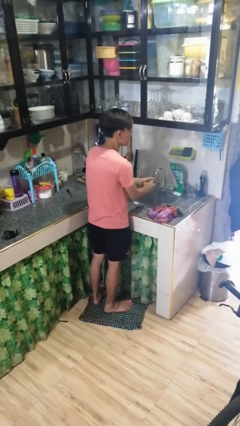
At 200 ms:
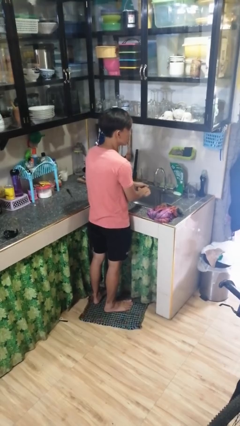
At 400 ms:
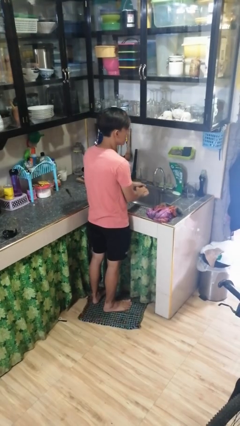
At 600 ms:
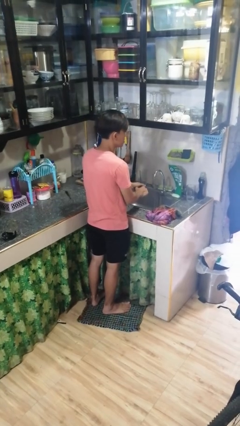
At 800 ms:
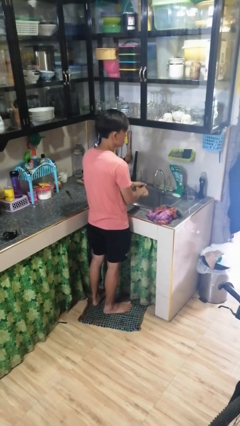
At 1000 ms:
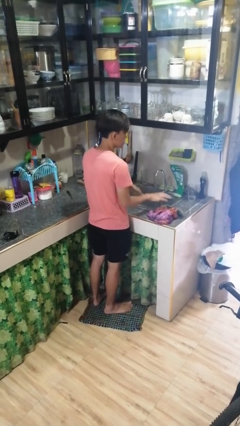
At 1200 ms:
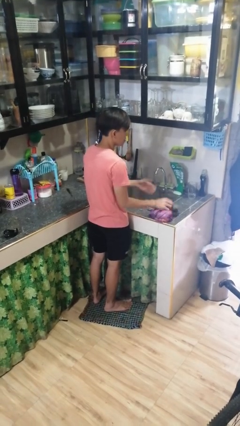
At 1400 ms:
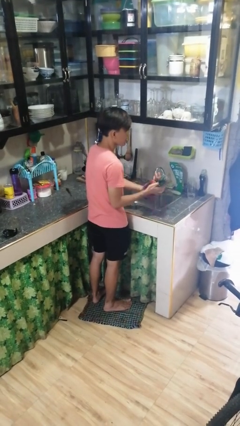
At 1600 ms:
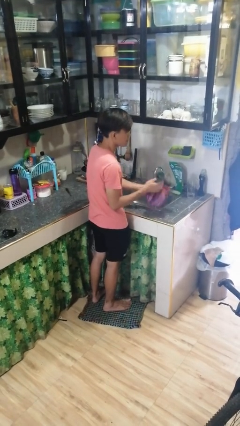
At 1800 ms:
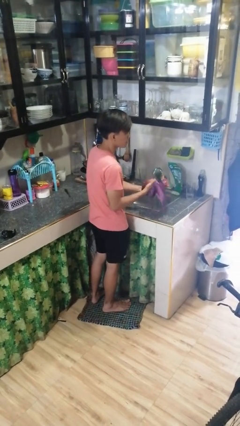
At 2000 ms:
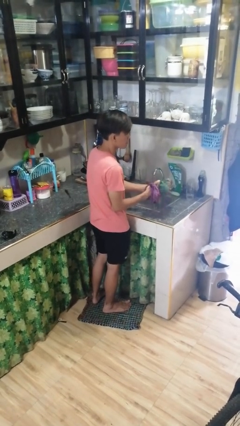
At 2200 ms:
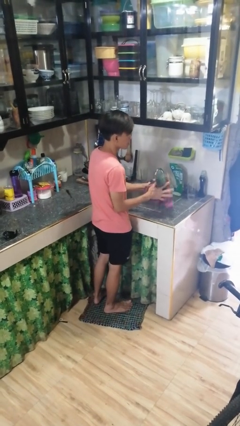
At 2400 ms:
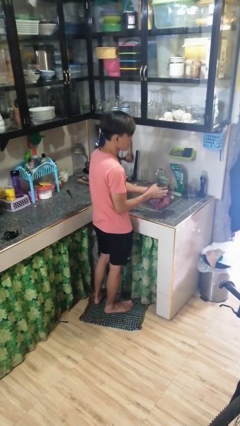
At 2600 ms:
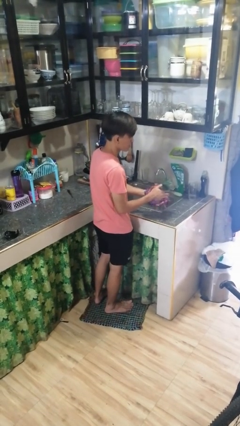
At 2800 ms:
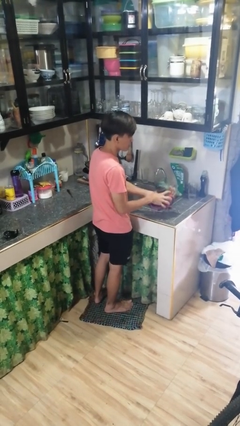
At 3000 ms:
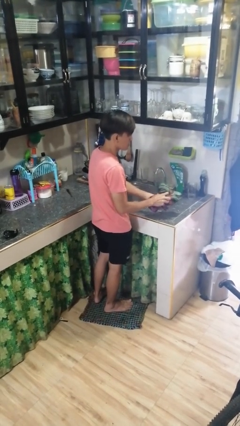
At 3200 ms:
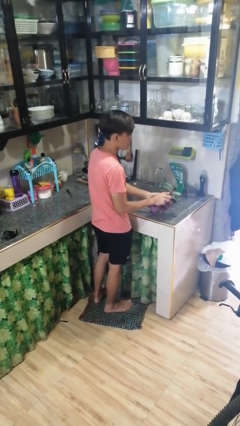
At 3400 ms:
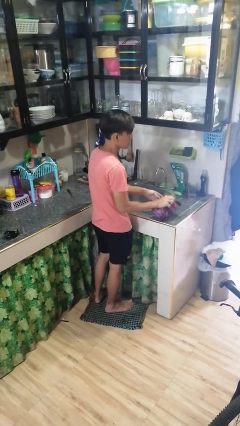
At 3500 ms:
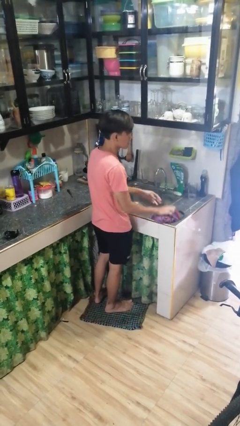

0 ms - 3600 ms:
person dries hands with towel

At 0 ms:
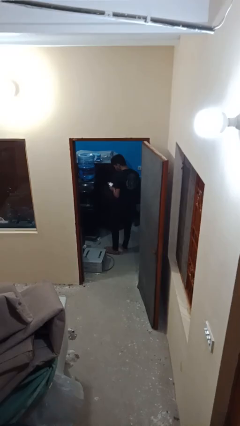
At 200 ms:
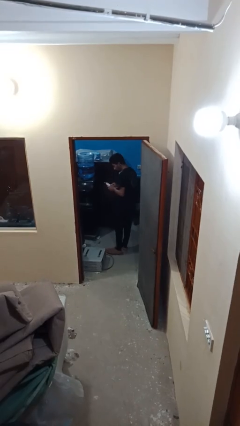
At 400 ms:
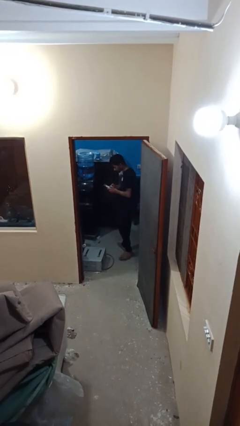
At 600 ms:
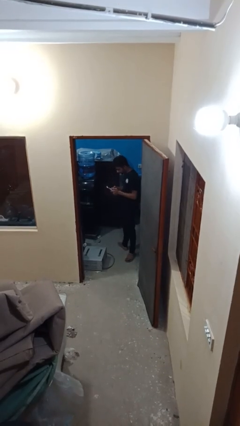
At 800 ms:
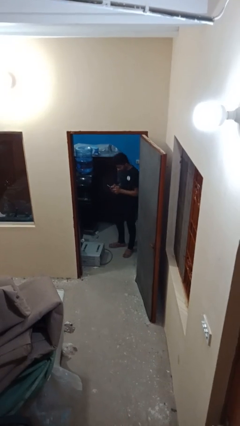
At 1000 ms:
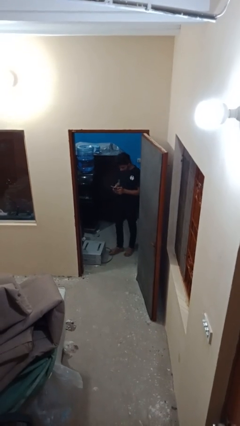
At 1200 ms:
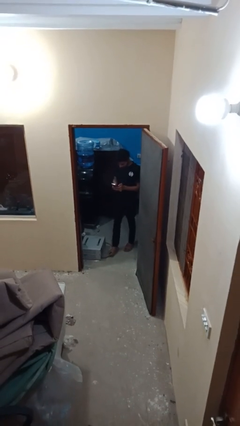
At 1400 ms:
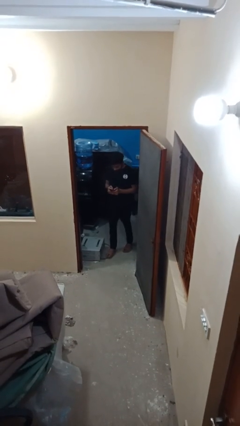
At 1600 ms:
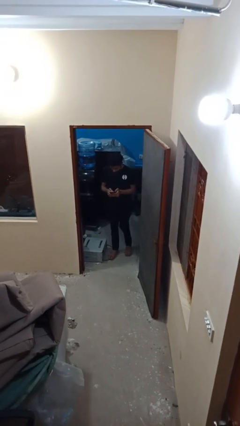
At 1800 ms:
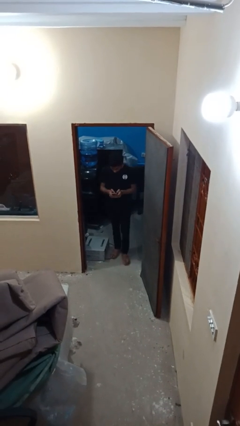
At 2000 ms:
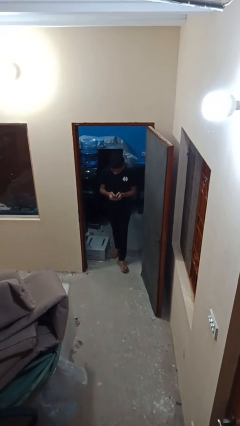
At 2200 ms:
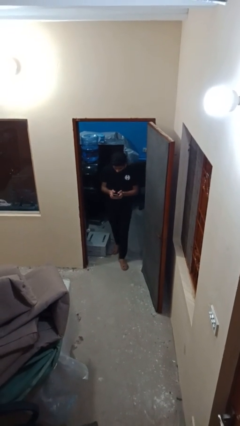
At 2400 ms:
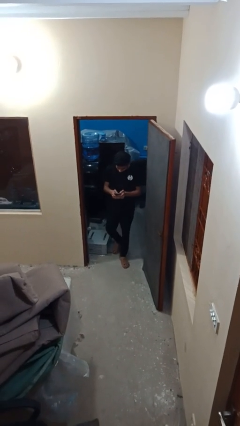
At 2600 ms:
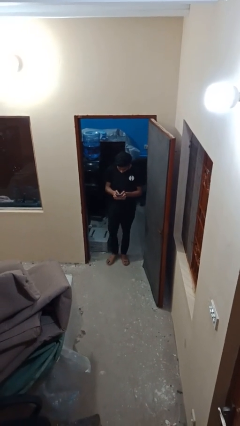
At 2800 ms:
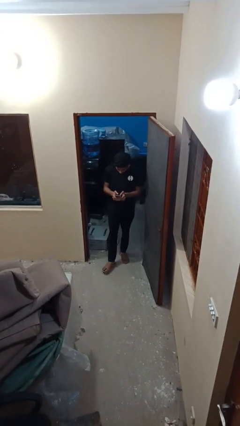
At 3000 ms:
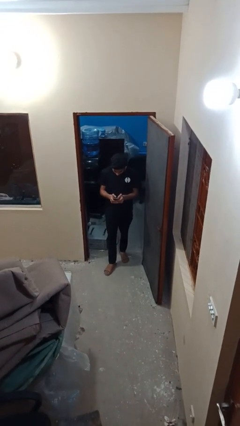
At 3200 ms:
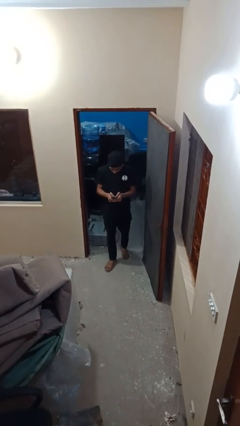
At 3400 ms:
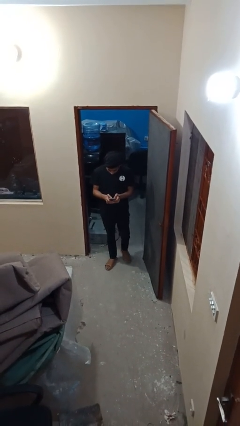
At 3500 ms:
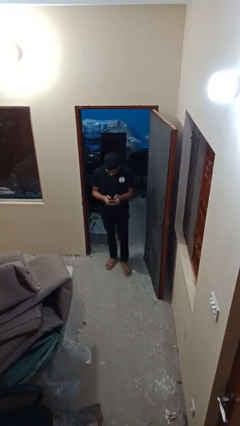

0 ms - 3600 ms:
person enters scene through structure

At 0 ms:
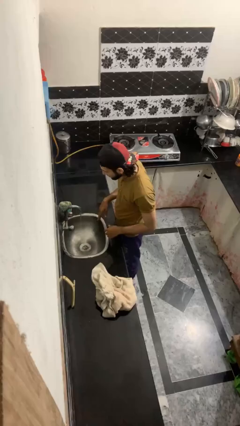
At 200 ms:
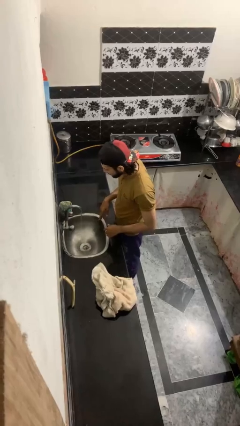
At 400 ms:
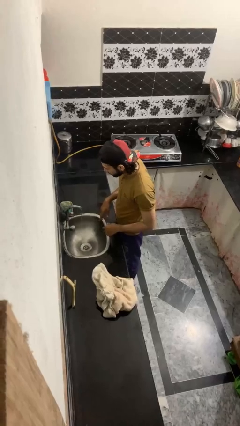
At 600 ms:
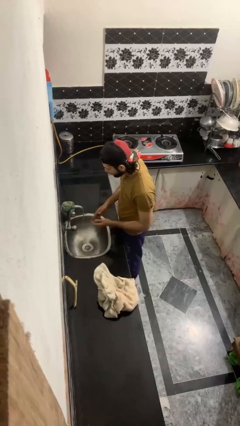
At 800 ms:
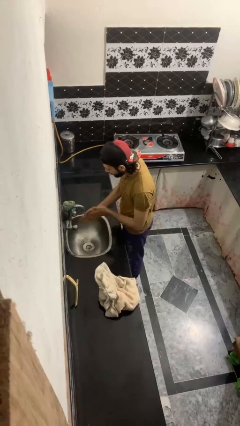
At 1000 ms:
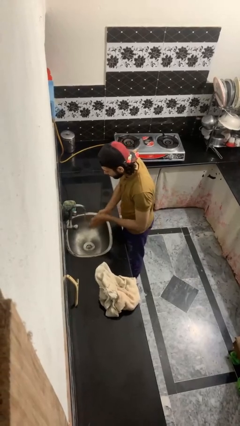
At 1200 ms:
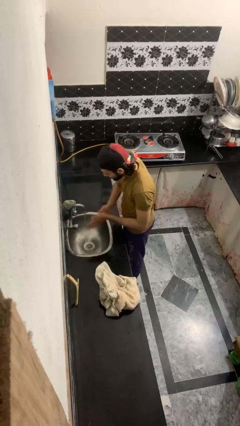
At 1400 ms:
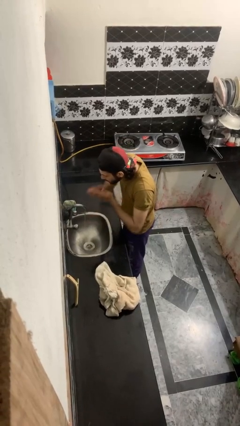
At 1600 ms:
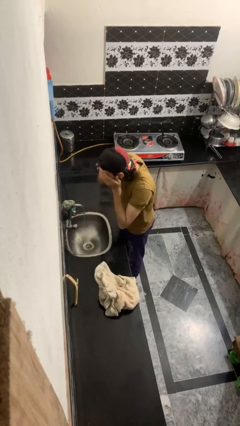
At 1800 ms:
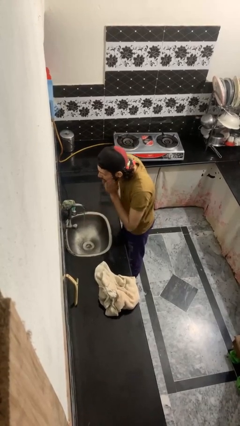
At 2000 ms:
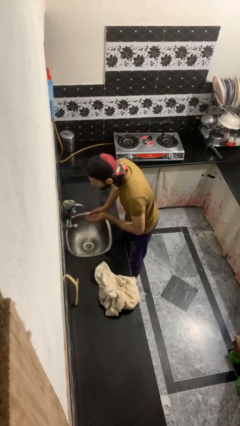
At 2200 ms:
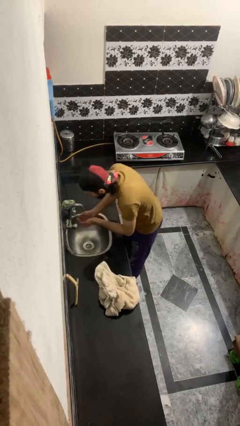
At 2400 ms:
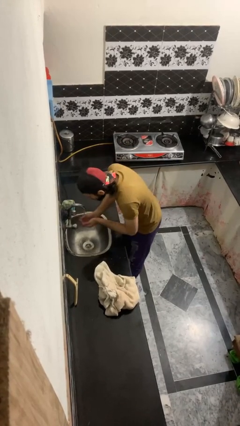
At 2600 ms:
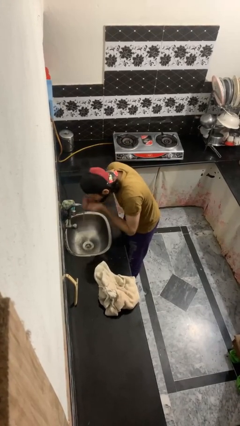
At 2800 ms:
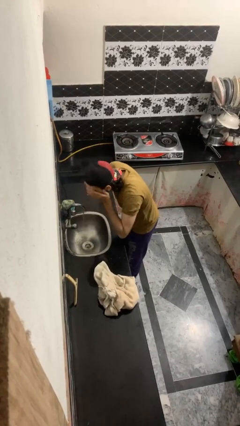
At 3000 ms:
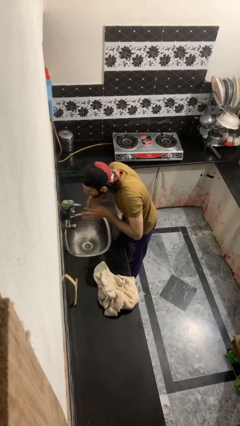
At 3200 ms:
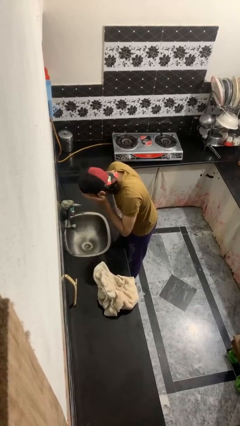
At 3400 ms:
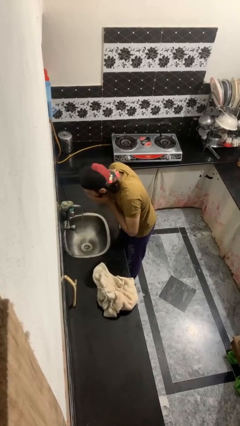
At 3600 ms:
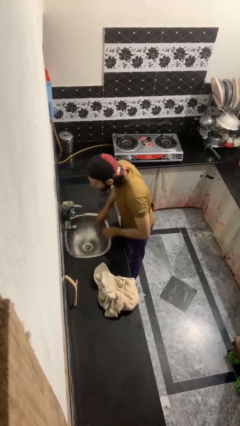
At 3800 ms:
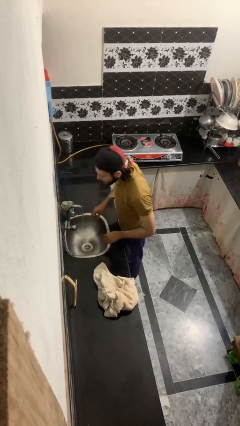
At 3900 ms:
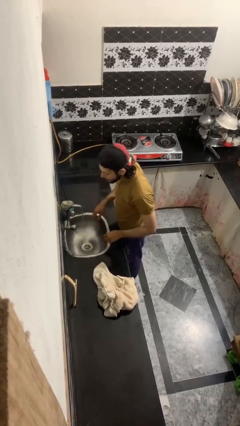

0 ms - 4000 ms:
person washes face

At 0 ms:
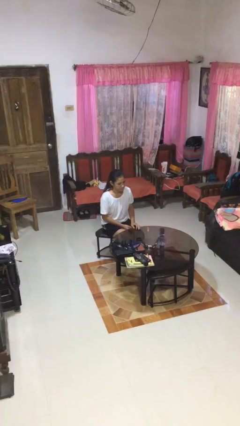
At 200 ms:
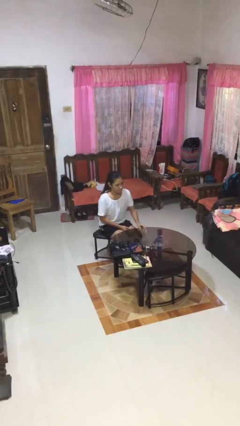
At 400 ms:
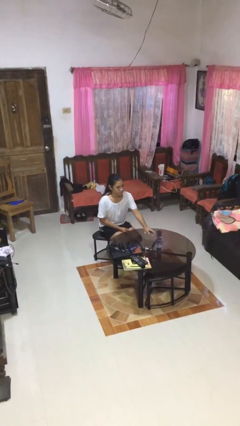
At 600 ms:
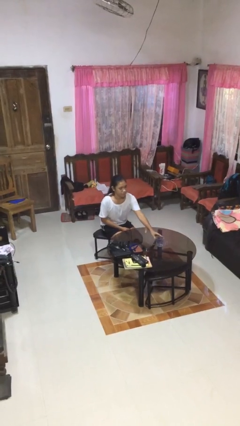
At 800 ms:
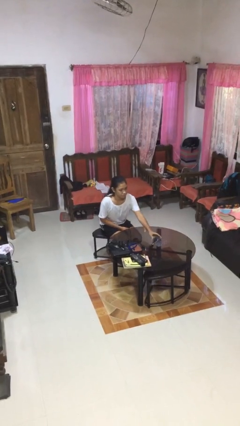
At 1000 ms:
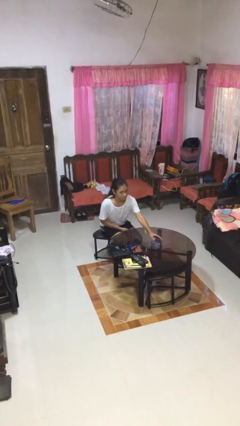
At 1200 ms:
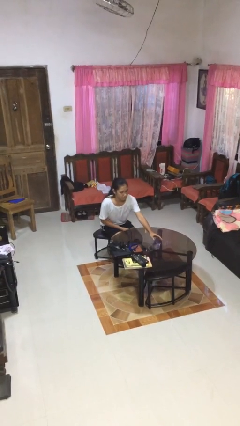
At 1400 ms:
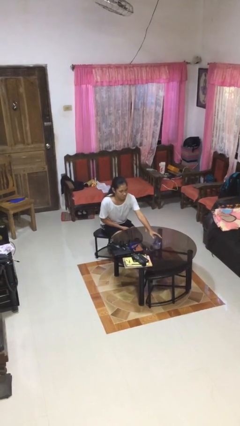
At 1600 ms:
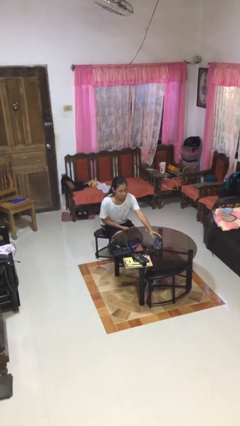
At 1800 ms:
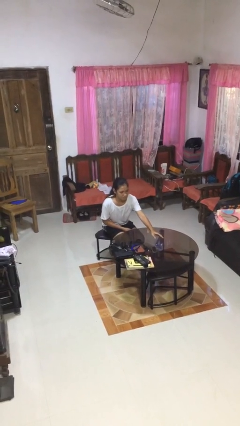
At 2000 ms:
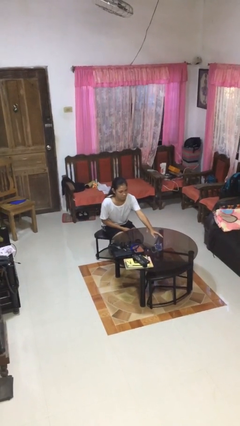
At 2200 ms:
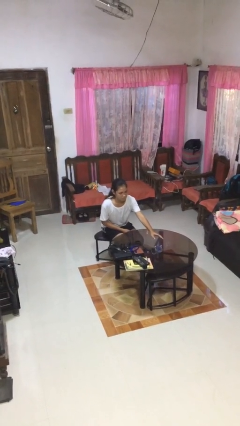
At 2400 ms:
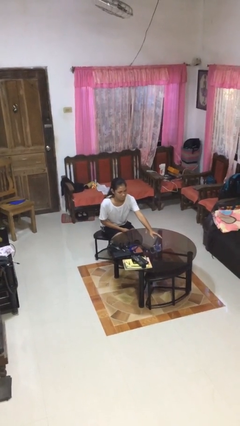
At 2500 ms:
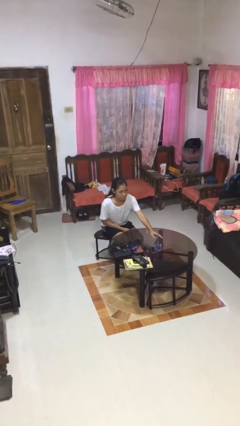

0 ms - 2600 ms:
person knocks over glass

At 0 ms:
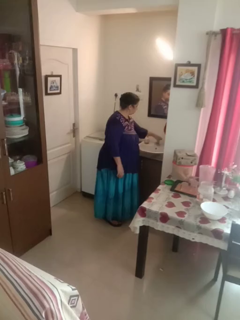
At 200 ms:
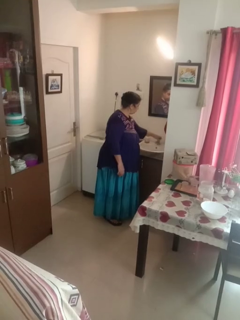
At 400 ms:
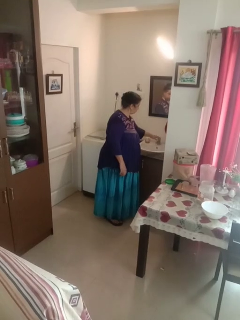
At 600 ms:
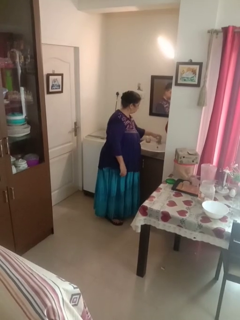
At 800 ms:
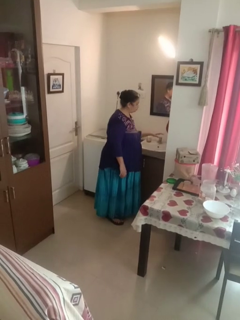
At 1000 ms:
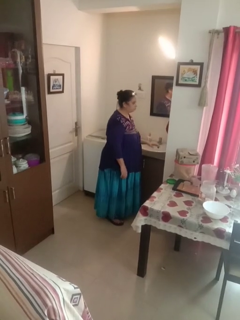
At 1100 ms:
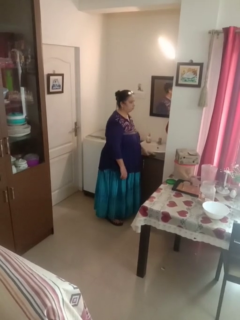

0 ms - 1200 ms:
person turns off faucet

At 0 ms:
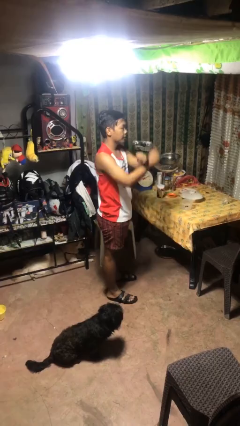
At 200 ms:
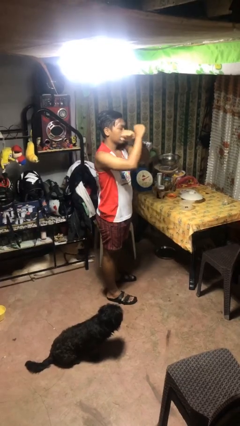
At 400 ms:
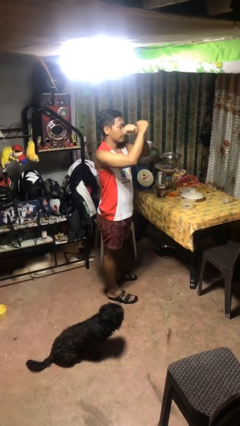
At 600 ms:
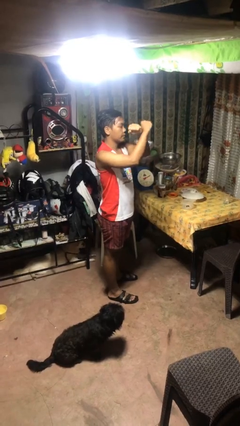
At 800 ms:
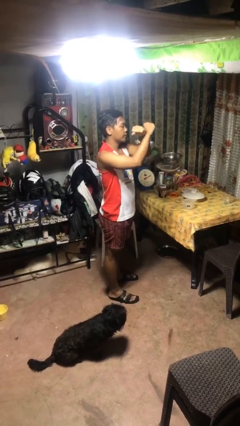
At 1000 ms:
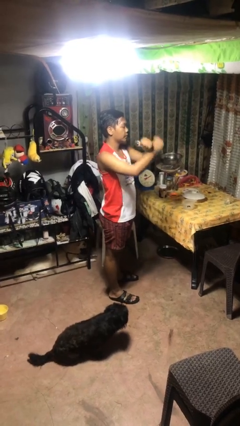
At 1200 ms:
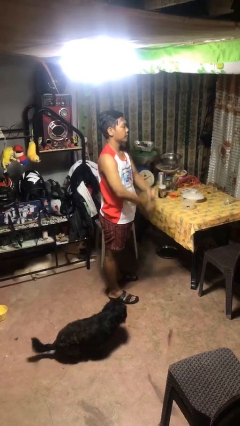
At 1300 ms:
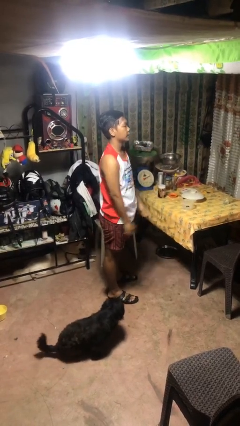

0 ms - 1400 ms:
person gestures arms x

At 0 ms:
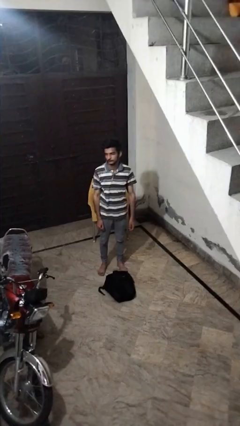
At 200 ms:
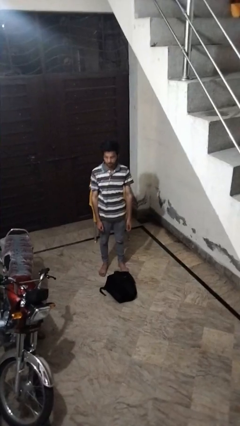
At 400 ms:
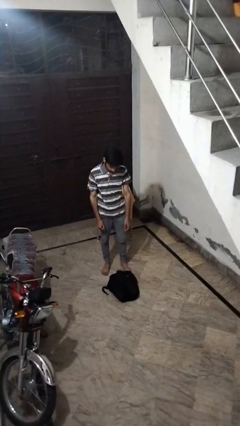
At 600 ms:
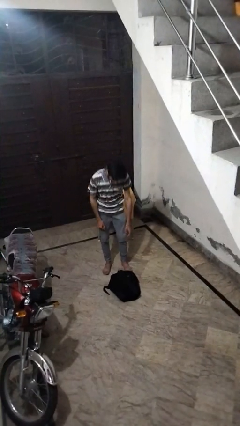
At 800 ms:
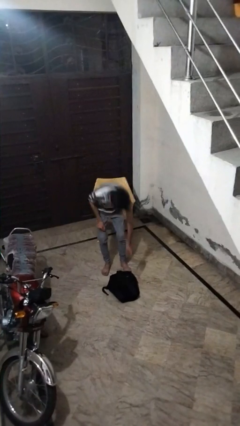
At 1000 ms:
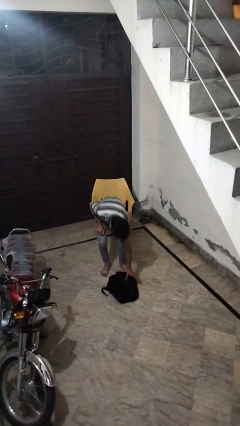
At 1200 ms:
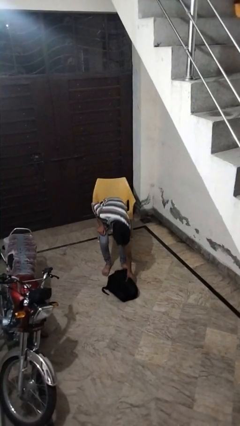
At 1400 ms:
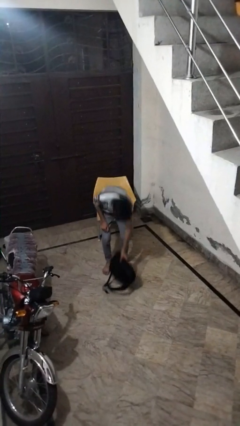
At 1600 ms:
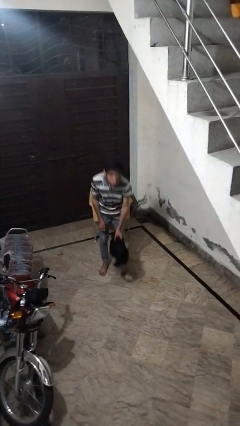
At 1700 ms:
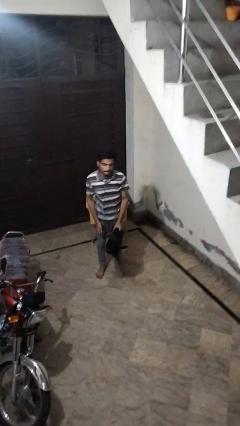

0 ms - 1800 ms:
person picks up object from floor
